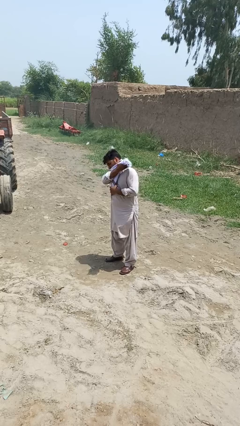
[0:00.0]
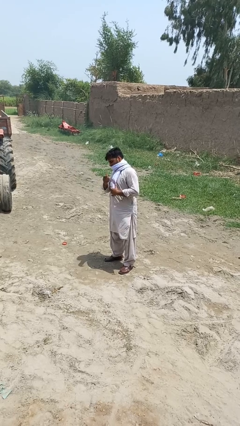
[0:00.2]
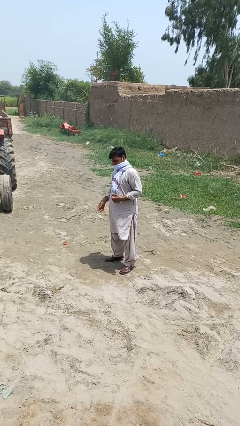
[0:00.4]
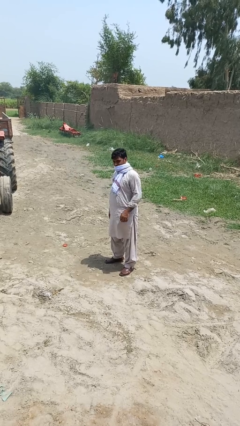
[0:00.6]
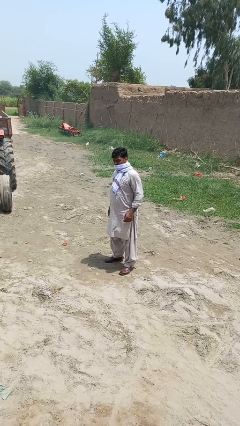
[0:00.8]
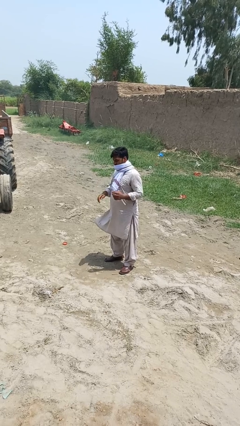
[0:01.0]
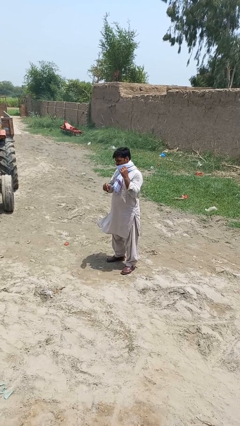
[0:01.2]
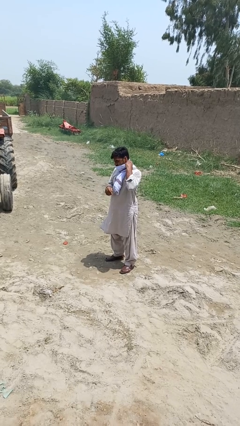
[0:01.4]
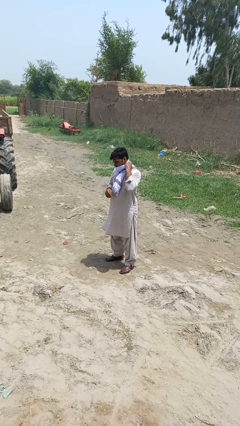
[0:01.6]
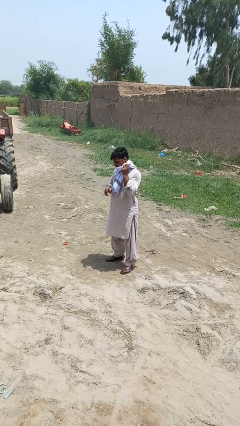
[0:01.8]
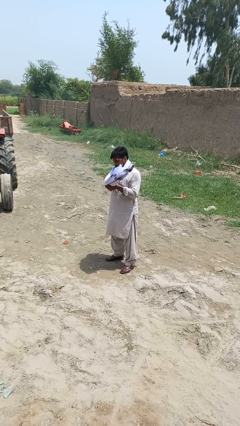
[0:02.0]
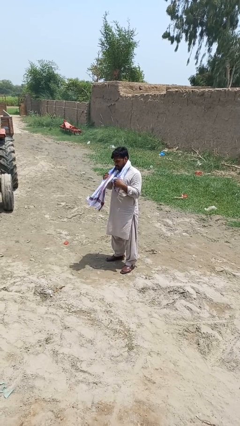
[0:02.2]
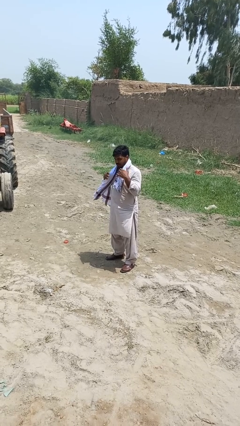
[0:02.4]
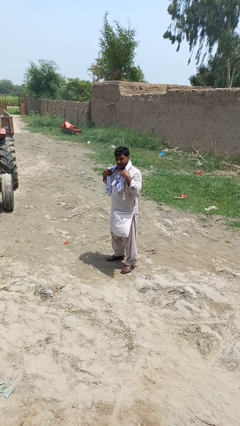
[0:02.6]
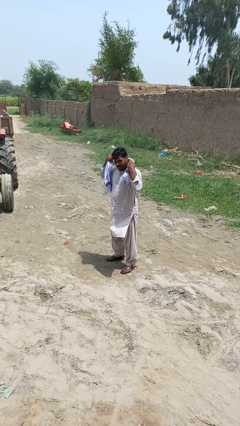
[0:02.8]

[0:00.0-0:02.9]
person takes off scarf

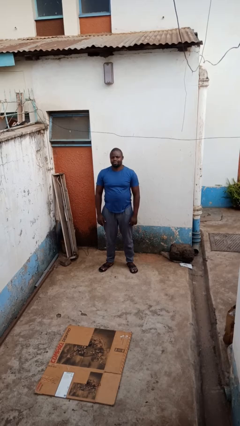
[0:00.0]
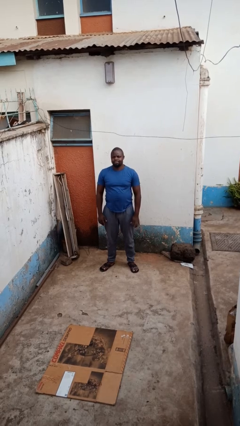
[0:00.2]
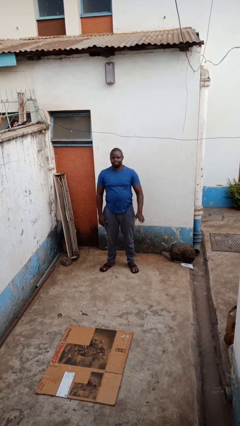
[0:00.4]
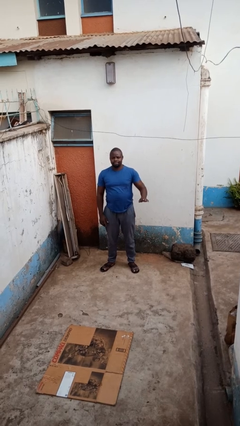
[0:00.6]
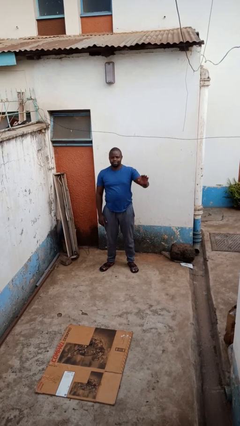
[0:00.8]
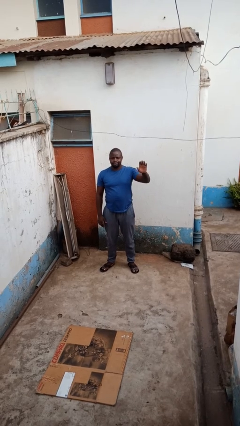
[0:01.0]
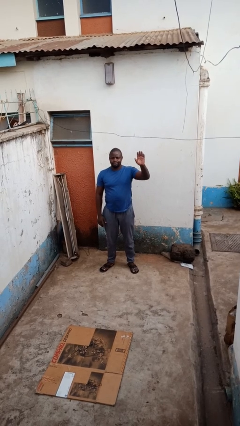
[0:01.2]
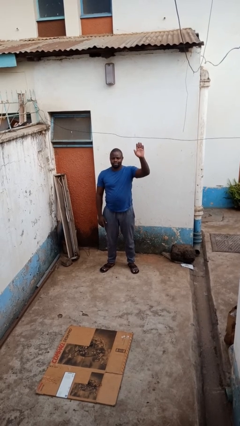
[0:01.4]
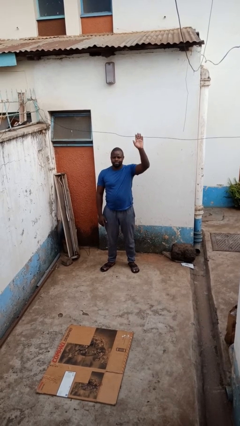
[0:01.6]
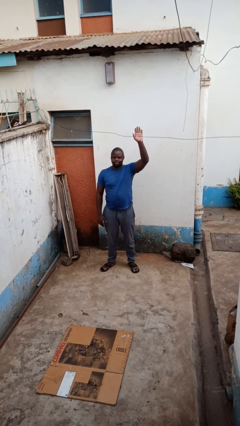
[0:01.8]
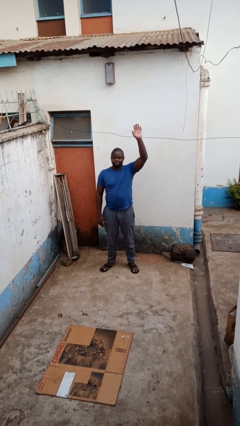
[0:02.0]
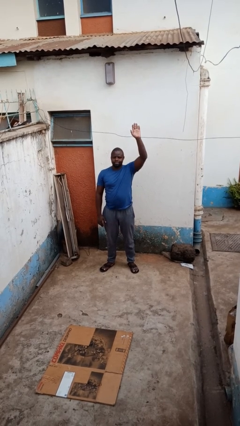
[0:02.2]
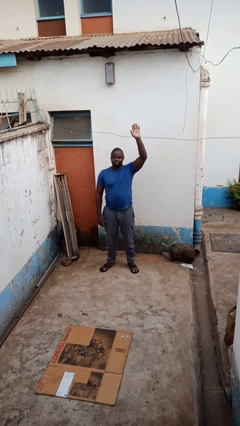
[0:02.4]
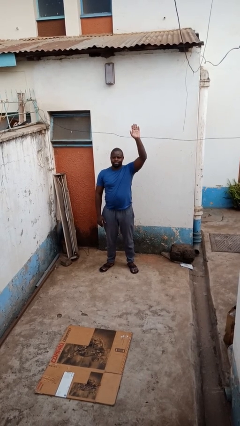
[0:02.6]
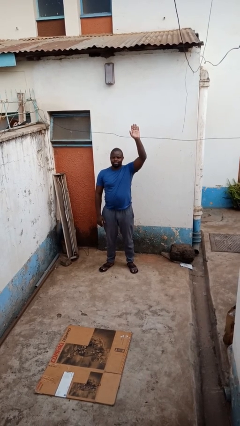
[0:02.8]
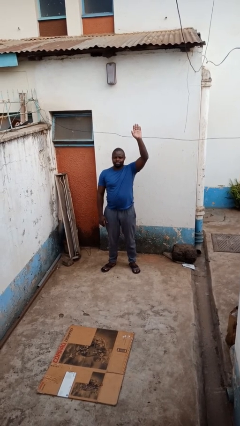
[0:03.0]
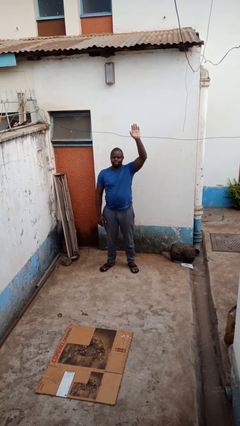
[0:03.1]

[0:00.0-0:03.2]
person gestures raise hand

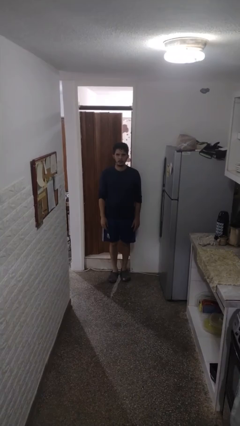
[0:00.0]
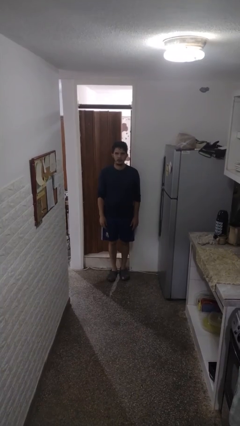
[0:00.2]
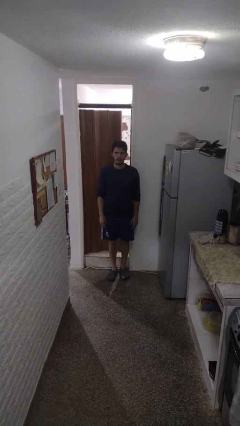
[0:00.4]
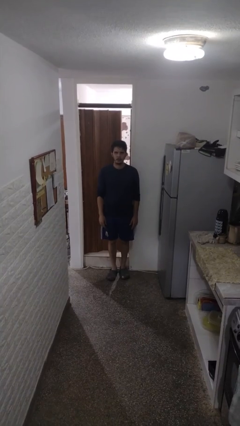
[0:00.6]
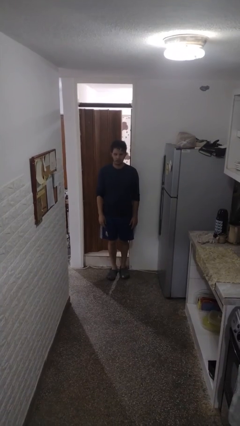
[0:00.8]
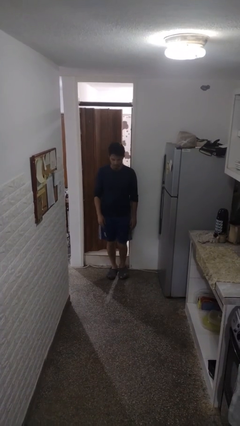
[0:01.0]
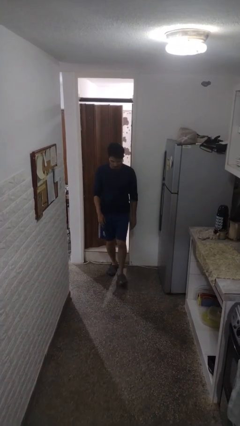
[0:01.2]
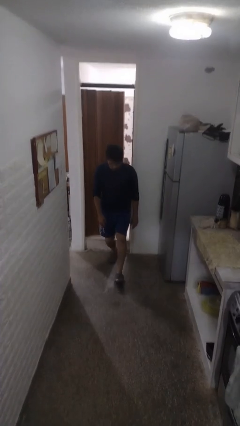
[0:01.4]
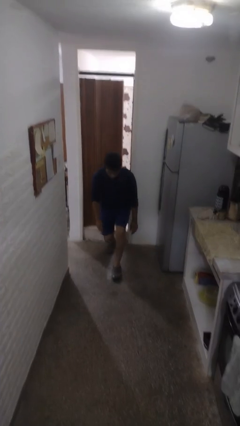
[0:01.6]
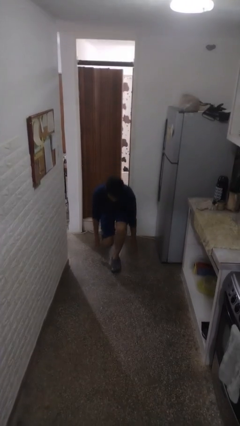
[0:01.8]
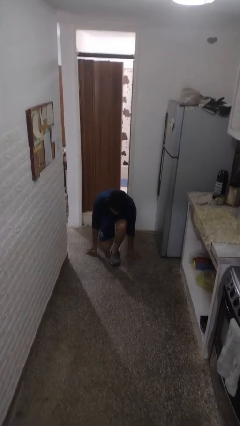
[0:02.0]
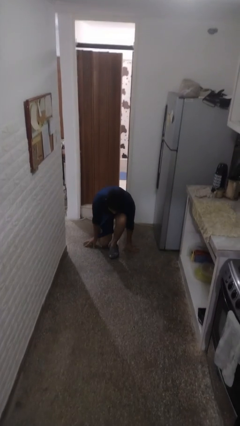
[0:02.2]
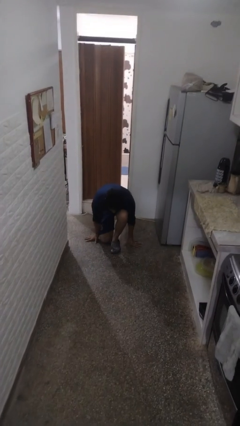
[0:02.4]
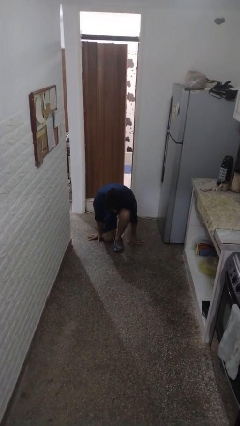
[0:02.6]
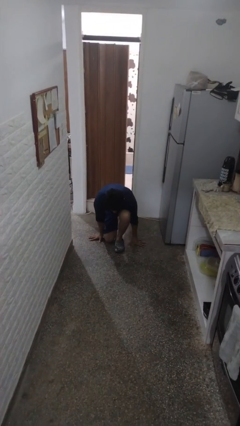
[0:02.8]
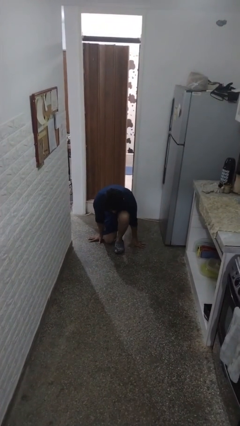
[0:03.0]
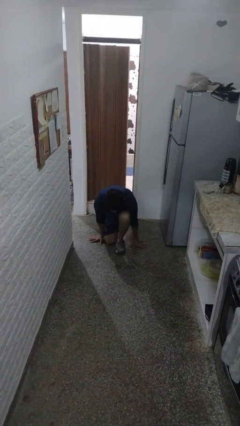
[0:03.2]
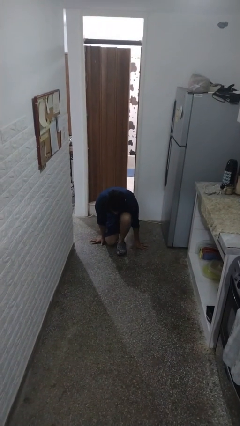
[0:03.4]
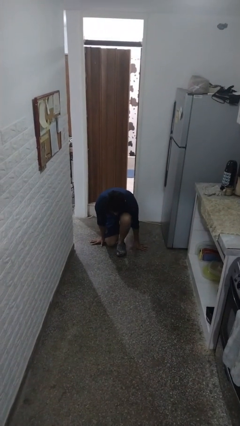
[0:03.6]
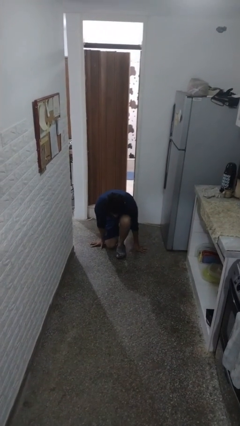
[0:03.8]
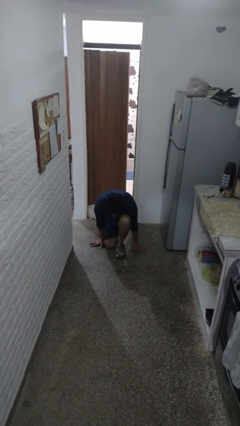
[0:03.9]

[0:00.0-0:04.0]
person kneels

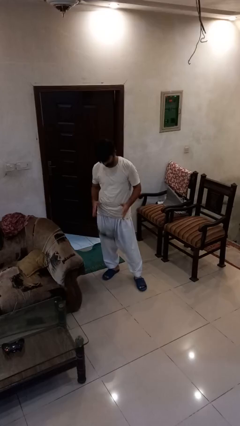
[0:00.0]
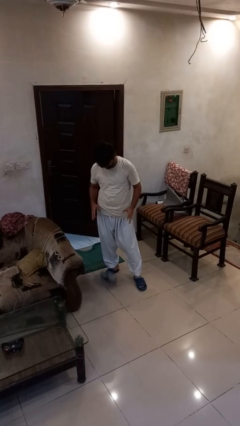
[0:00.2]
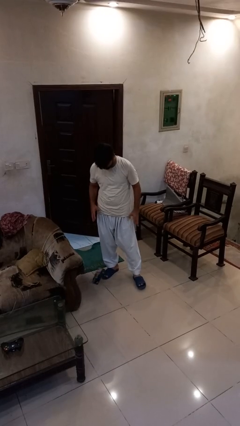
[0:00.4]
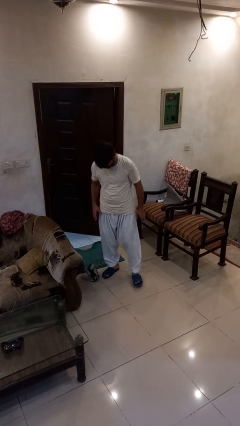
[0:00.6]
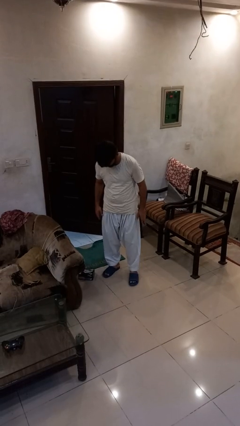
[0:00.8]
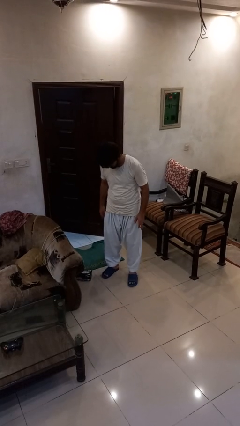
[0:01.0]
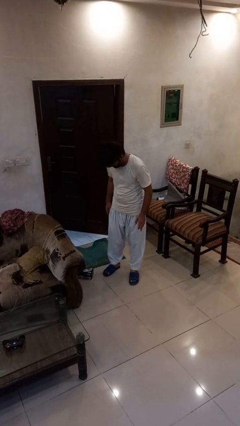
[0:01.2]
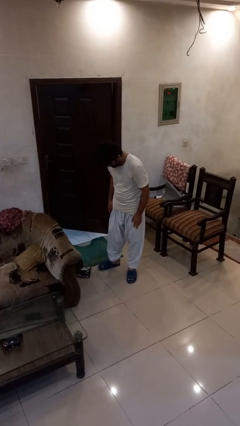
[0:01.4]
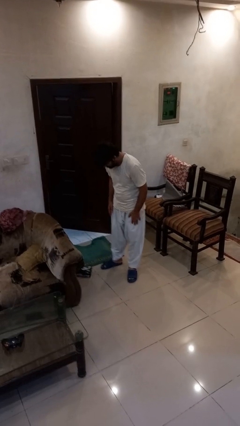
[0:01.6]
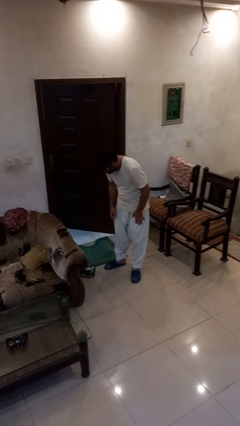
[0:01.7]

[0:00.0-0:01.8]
person drops object

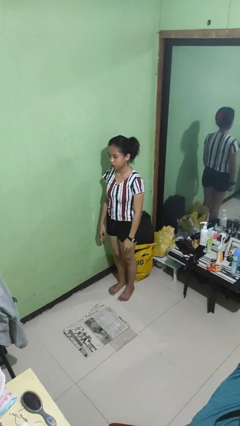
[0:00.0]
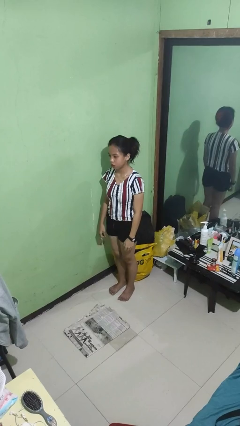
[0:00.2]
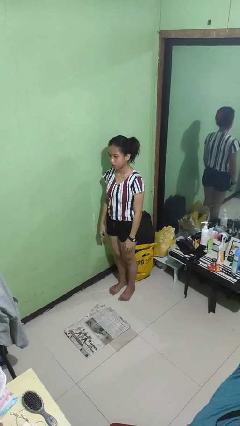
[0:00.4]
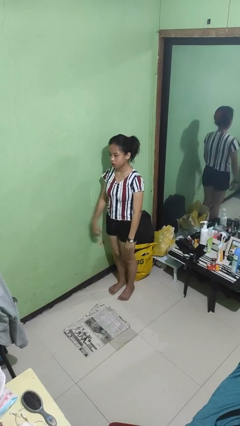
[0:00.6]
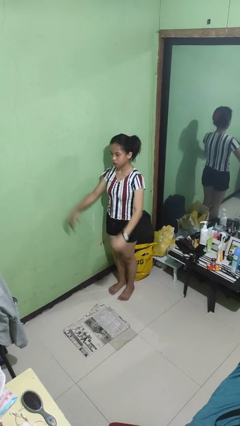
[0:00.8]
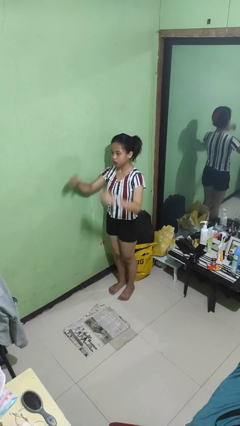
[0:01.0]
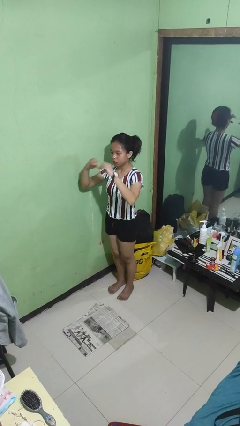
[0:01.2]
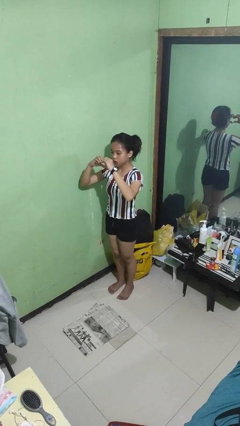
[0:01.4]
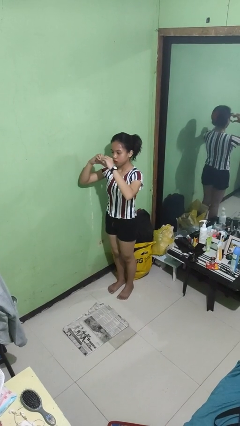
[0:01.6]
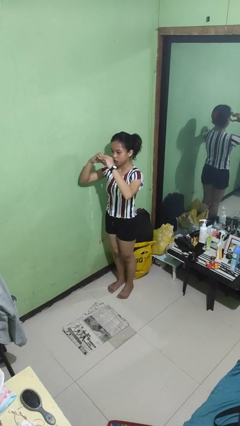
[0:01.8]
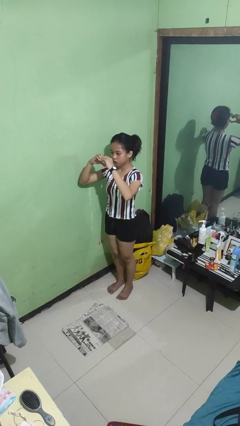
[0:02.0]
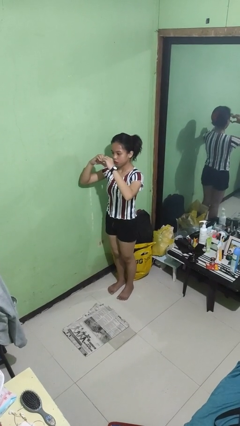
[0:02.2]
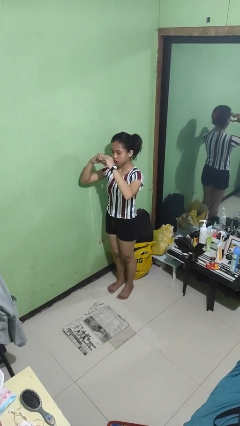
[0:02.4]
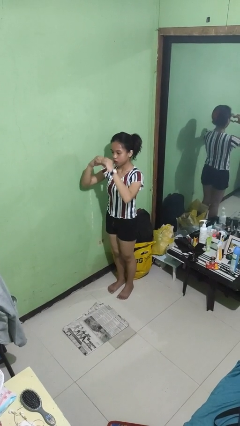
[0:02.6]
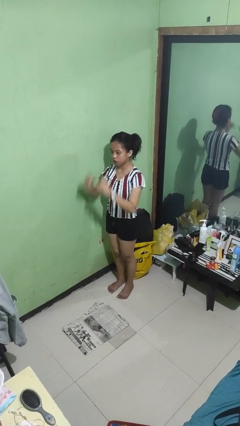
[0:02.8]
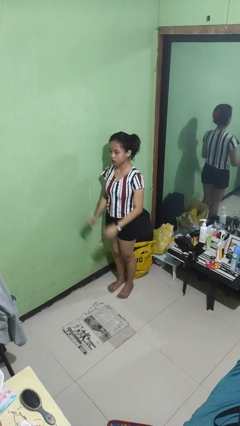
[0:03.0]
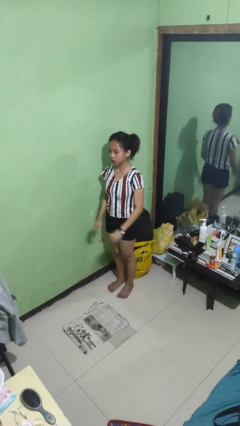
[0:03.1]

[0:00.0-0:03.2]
person gestures heart

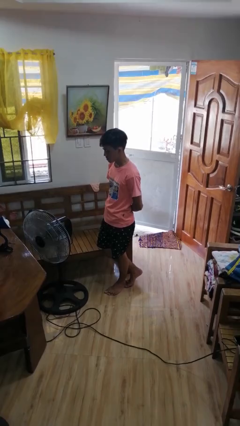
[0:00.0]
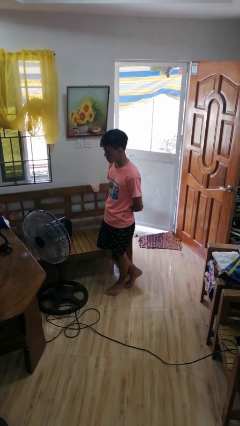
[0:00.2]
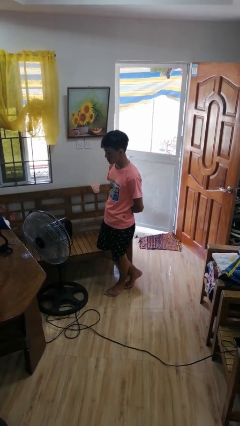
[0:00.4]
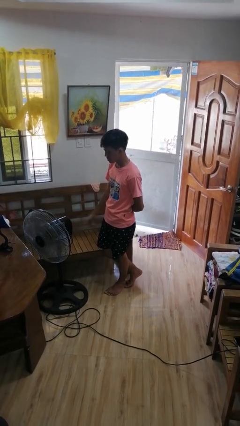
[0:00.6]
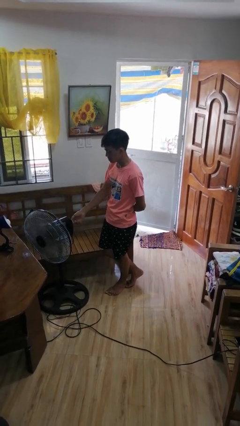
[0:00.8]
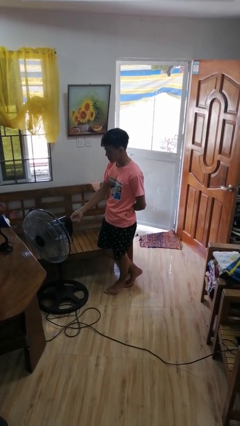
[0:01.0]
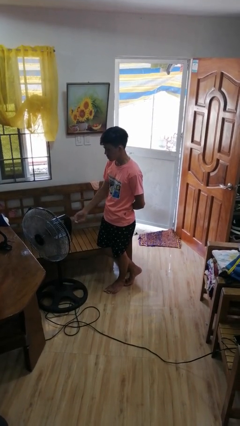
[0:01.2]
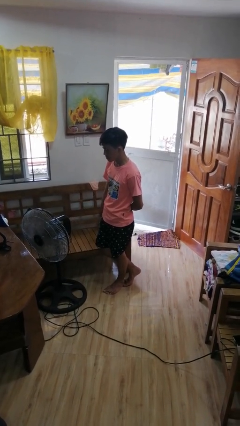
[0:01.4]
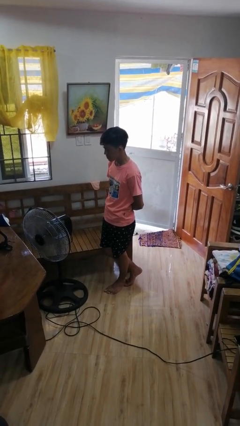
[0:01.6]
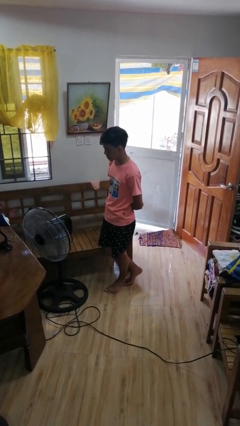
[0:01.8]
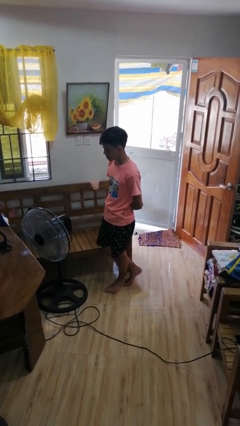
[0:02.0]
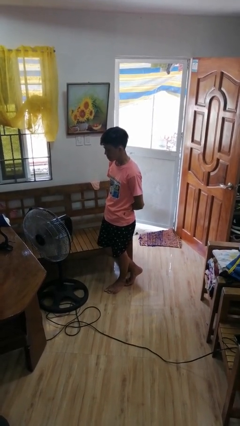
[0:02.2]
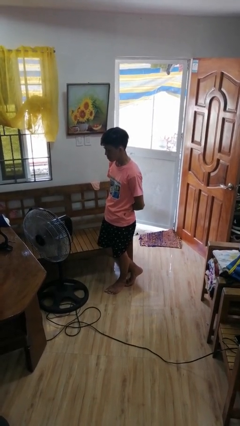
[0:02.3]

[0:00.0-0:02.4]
person turns on fan

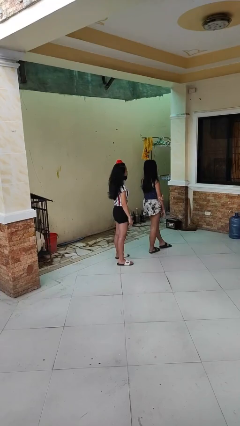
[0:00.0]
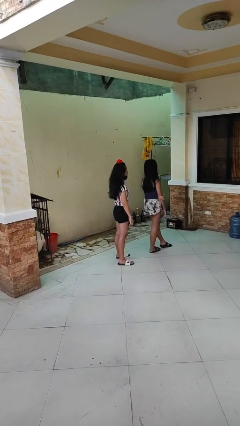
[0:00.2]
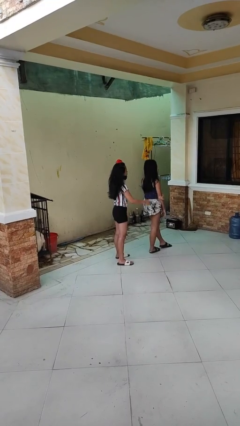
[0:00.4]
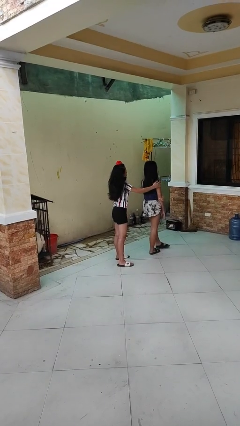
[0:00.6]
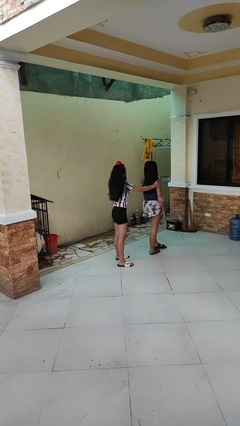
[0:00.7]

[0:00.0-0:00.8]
person grabs person by shoulder
